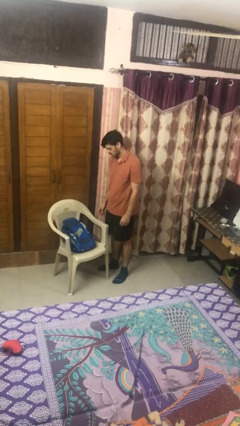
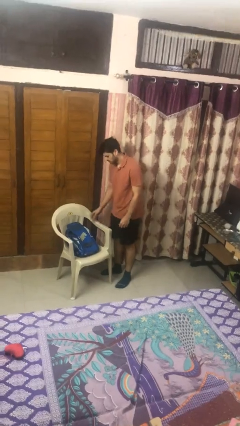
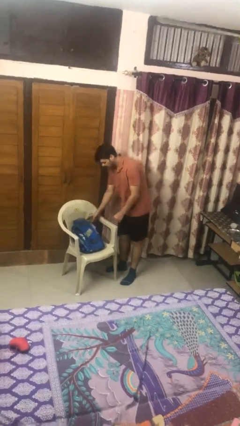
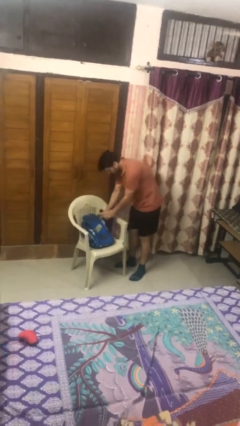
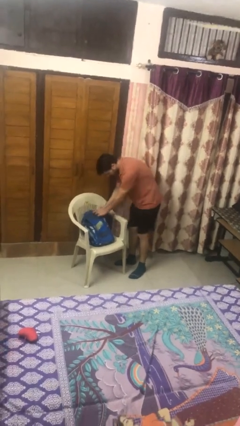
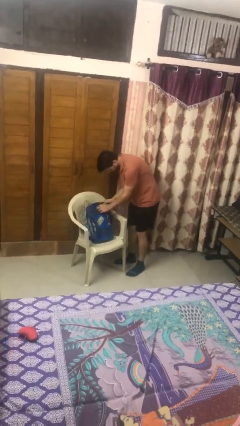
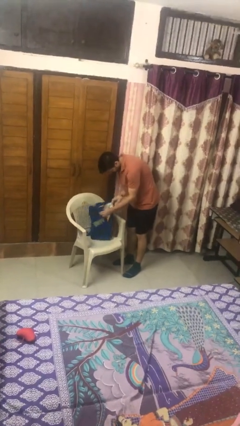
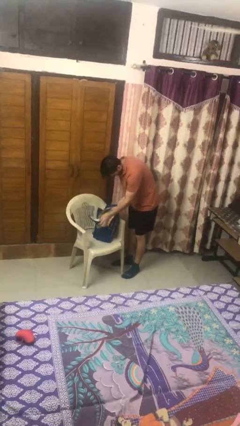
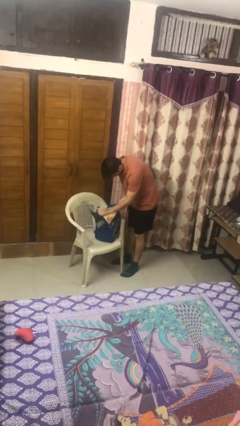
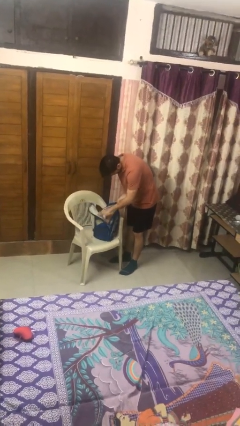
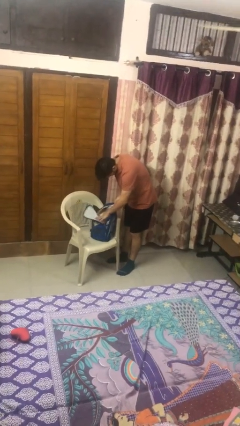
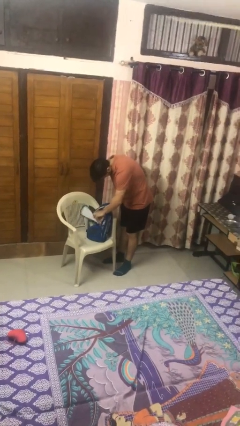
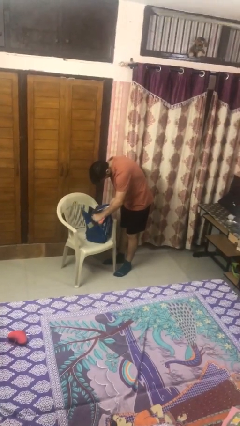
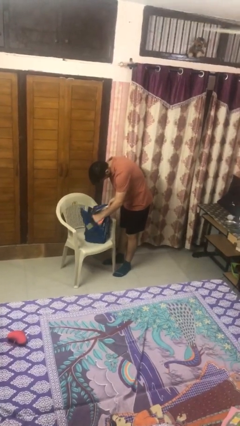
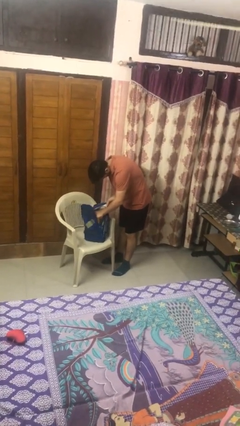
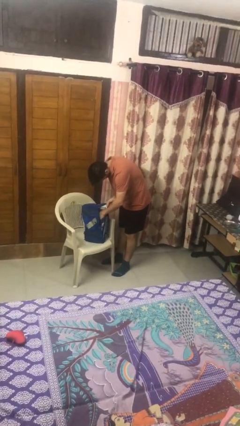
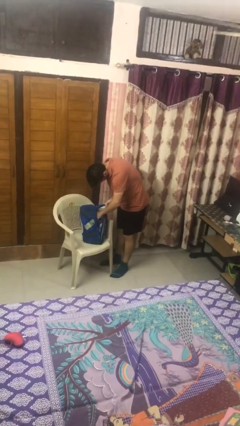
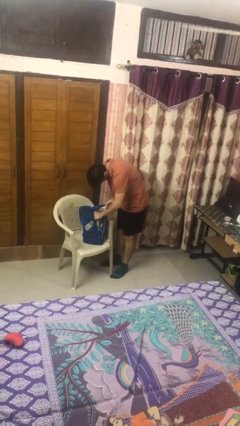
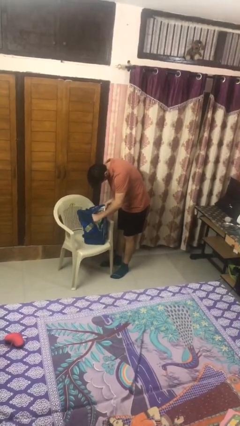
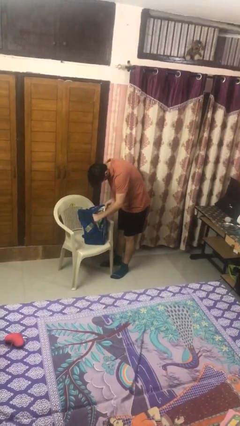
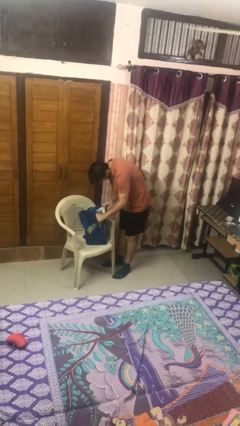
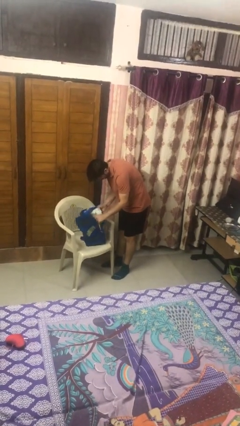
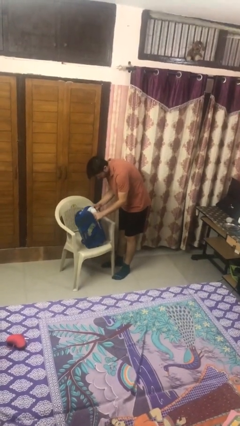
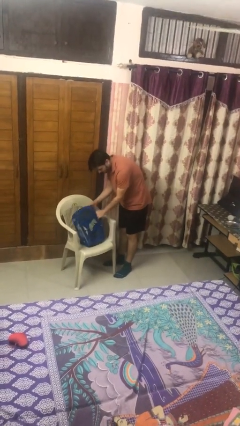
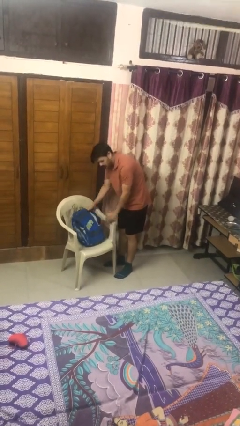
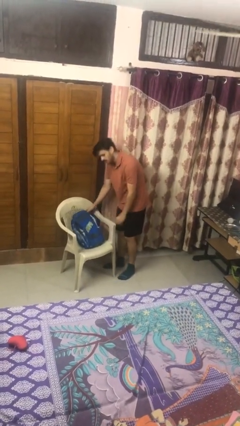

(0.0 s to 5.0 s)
person searches in bag

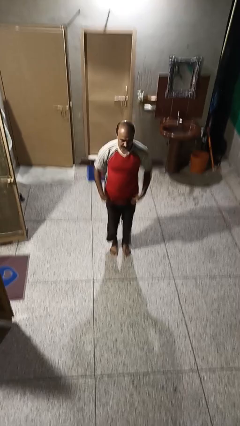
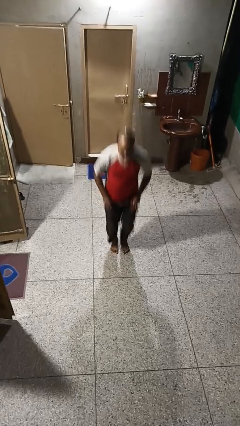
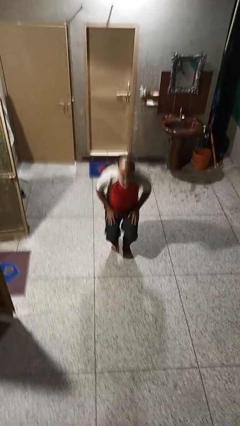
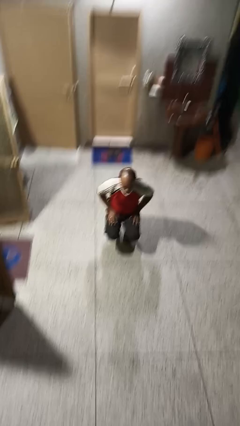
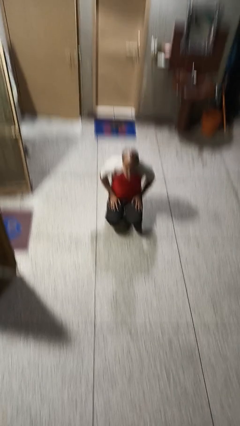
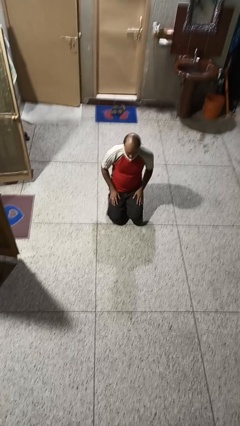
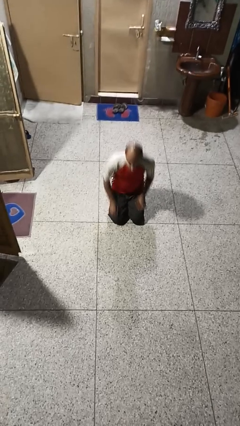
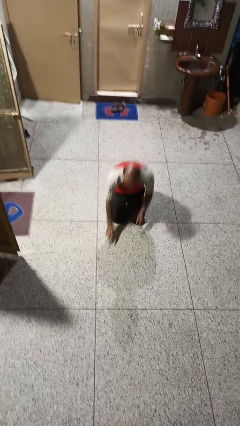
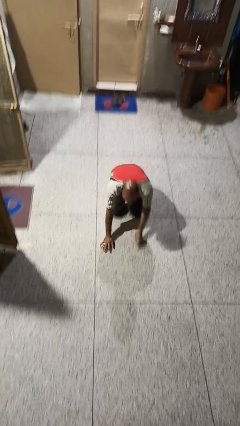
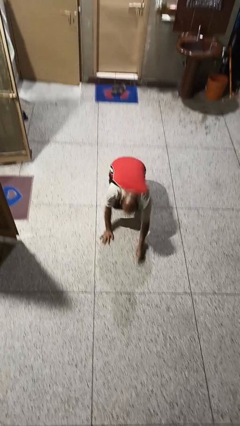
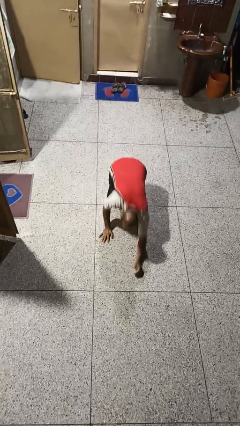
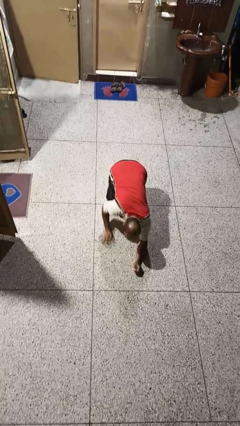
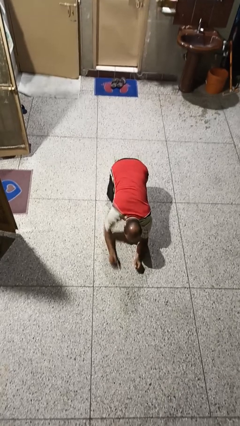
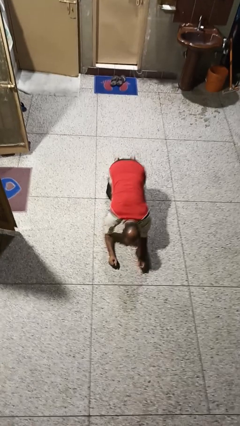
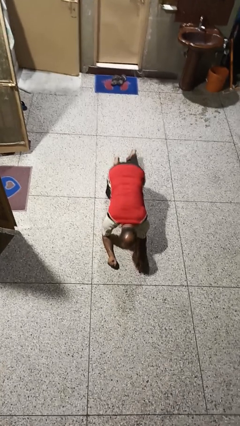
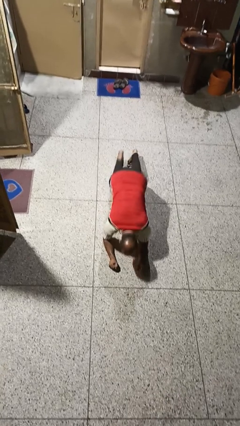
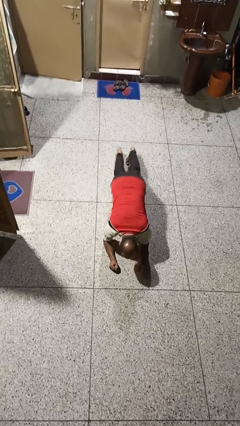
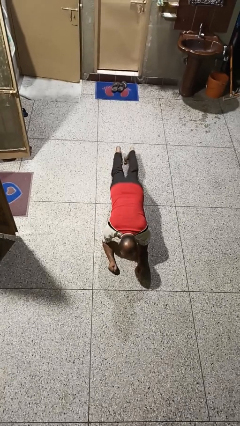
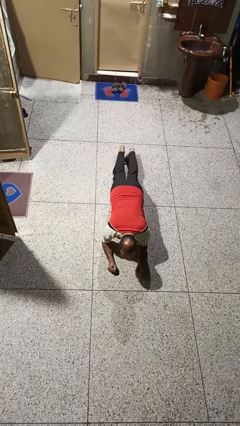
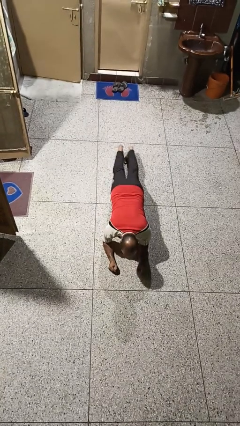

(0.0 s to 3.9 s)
person exercises with plank

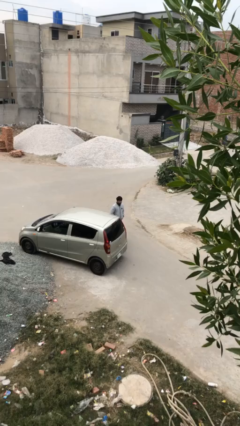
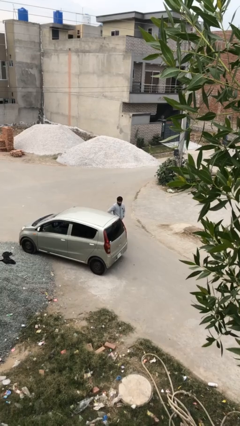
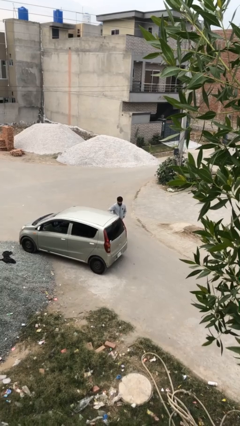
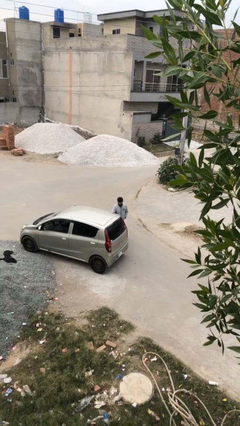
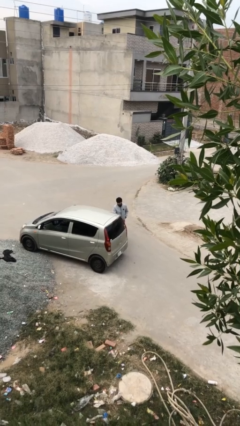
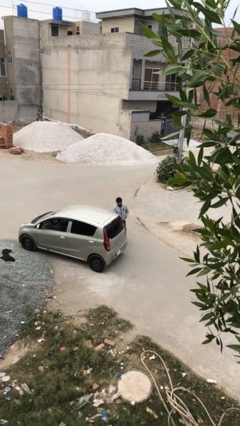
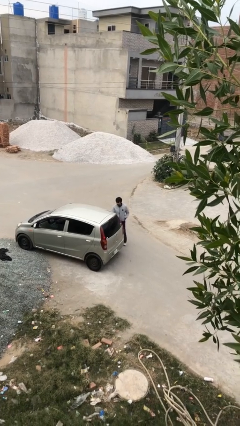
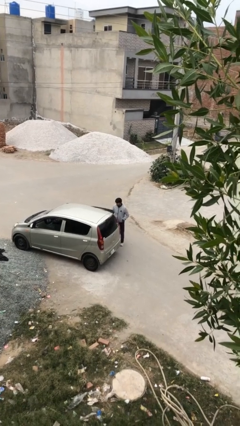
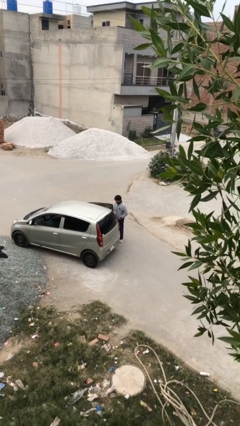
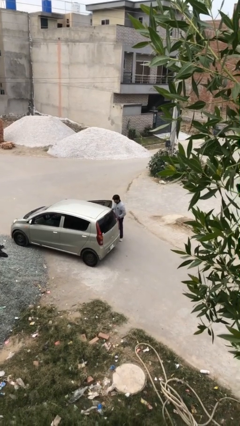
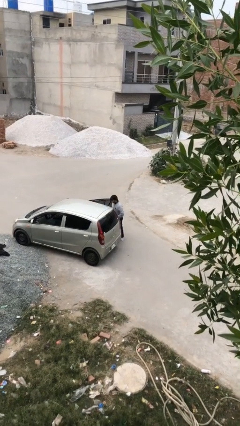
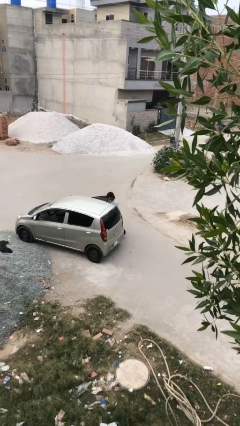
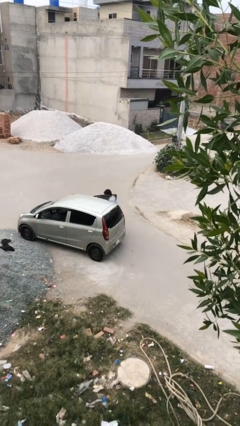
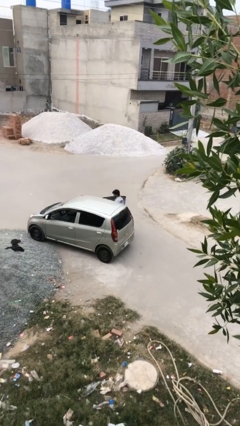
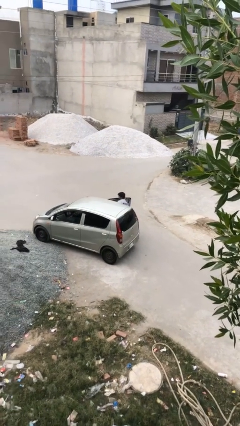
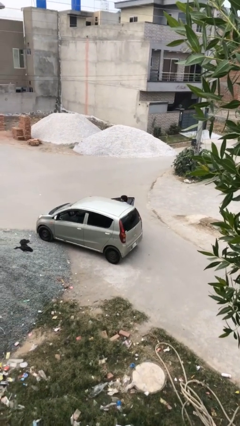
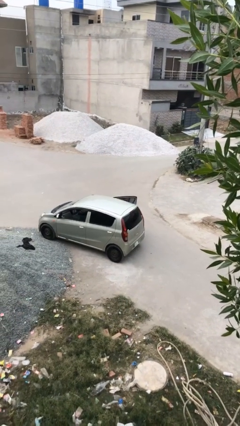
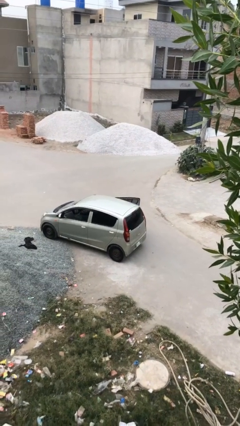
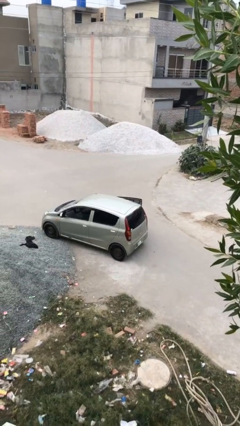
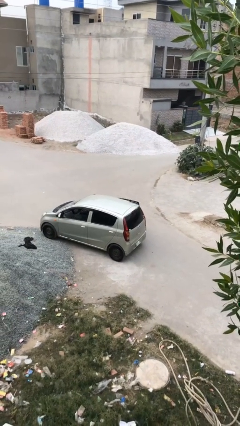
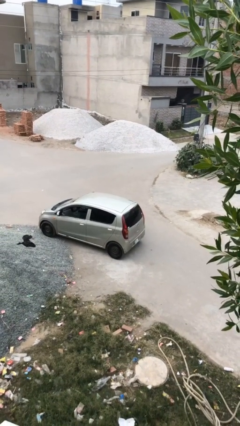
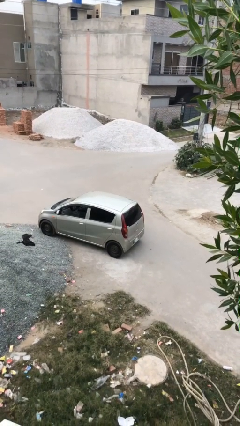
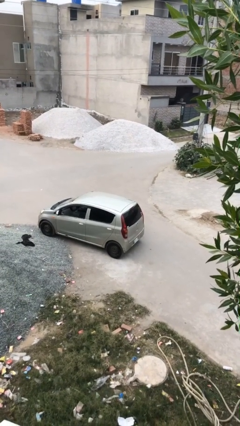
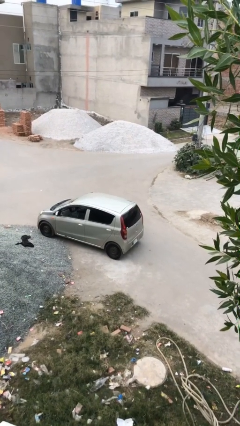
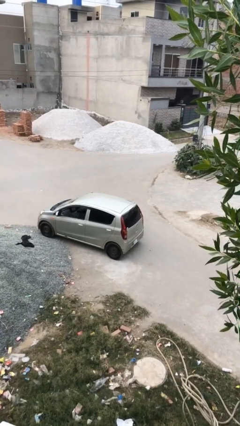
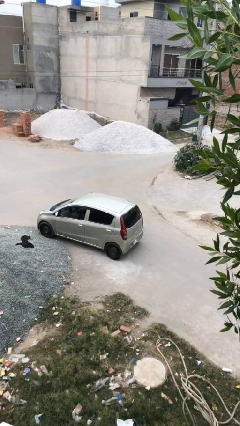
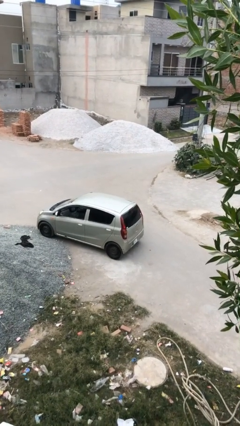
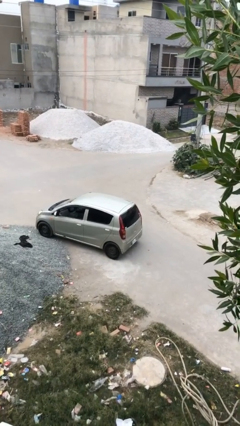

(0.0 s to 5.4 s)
car picks up person

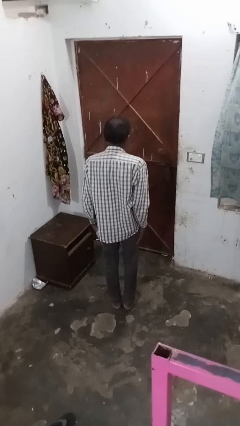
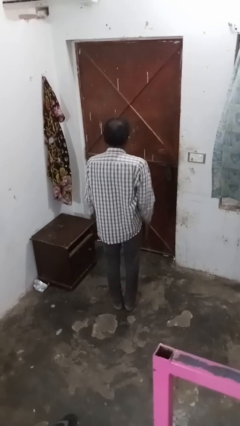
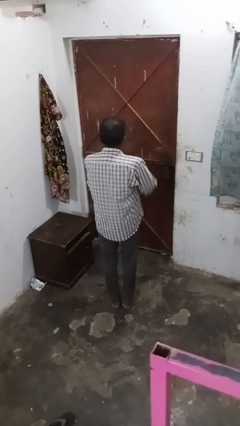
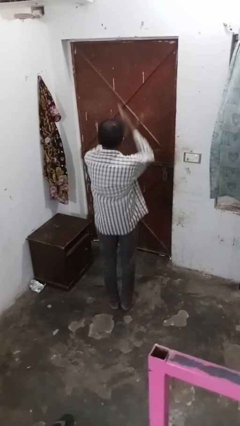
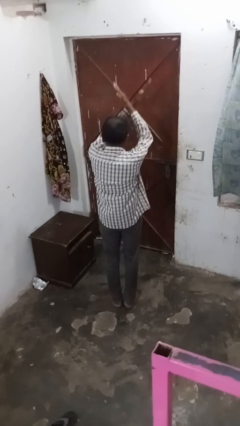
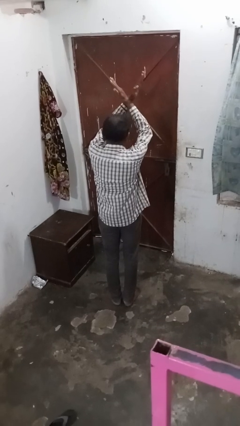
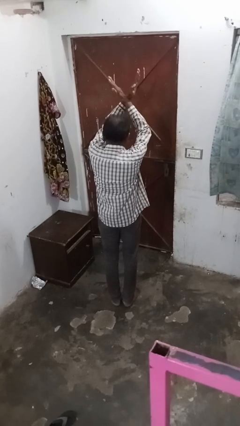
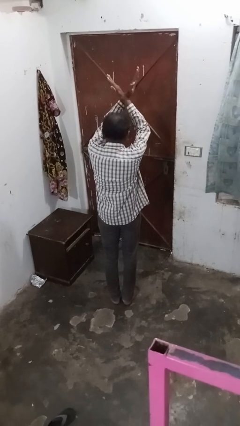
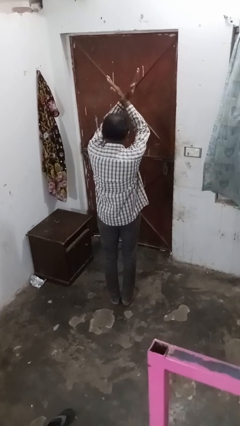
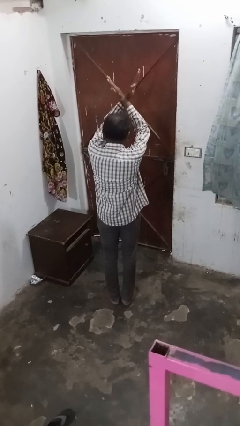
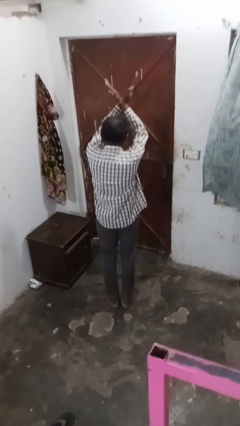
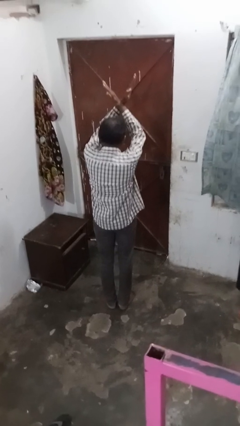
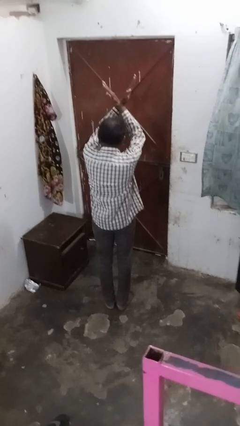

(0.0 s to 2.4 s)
person gestures arms x

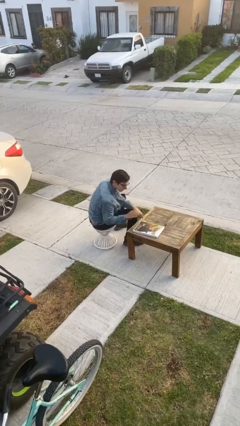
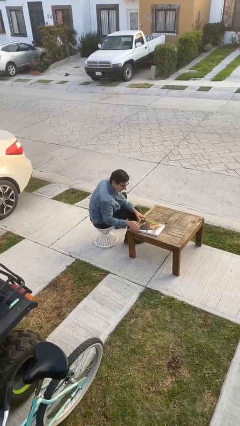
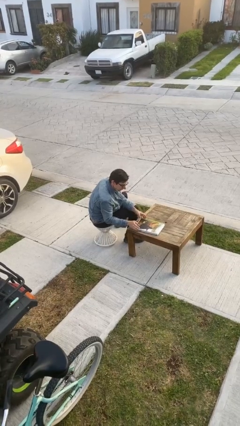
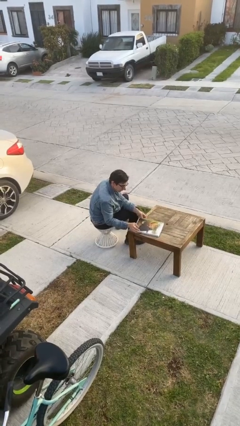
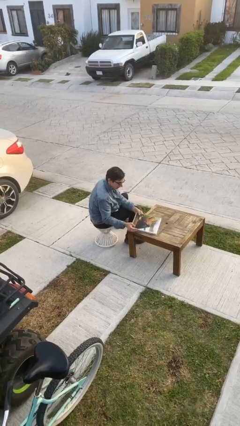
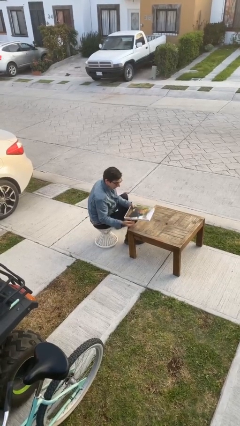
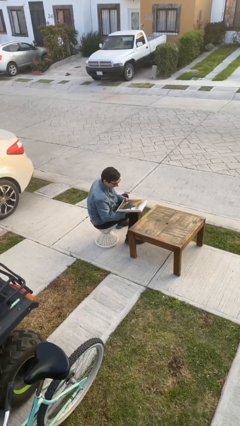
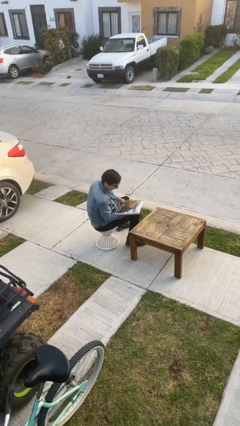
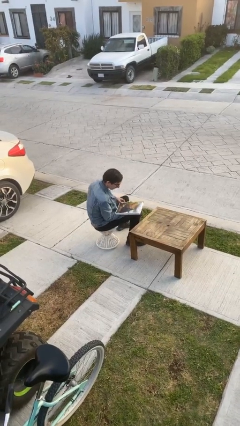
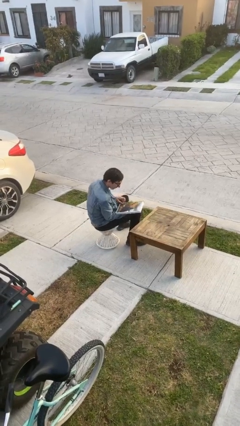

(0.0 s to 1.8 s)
person picks up object from table
